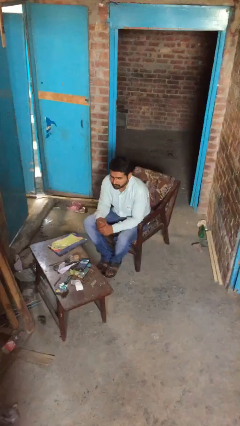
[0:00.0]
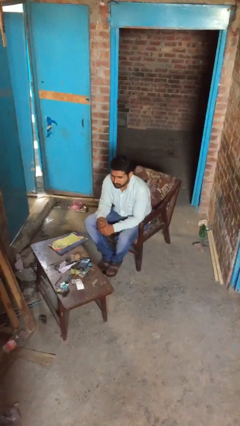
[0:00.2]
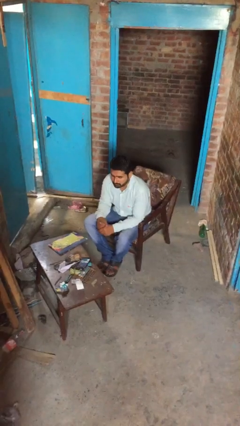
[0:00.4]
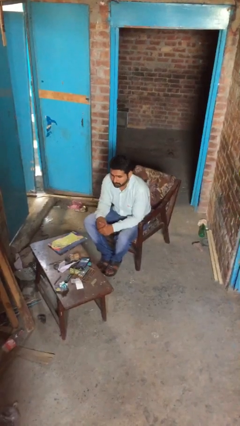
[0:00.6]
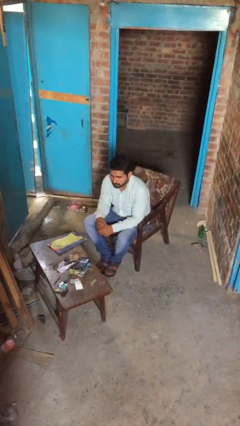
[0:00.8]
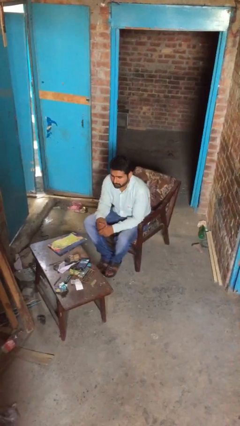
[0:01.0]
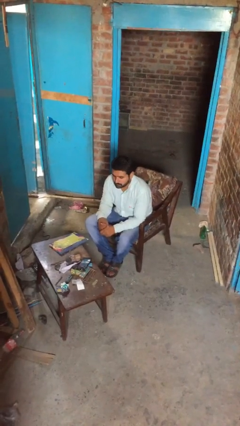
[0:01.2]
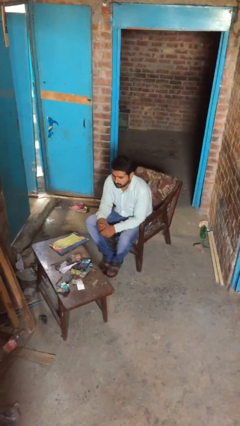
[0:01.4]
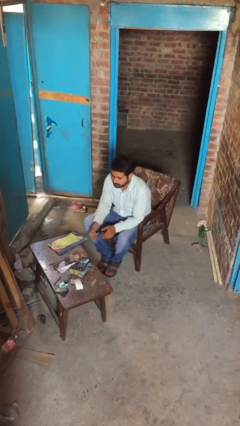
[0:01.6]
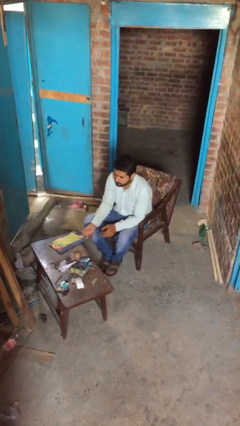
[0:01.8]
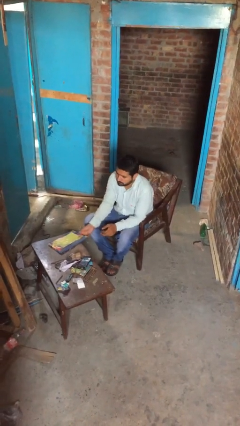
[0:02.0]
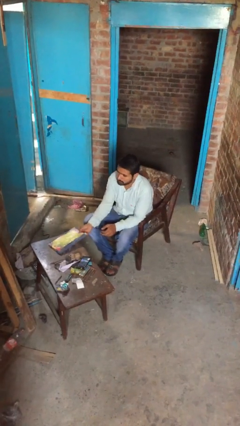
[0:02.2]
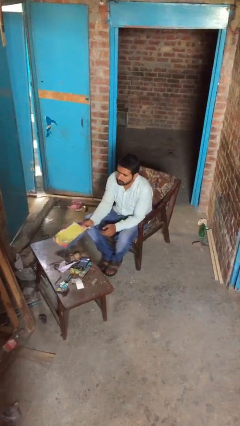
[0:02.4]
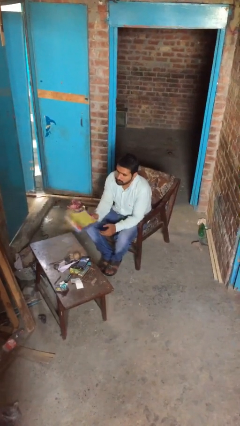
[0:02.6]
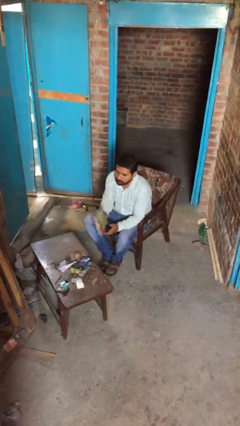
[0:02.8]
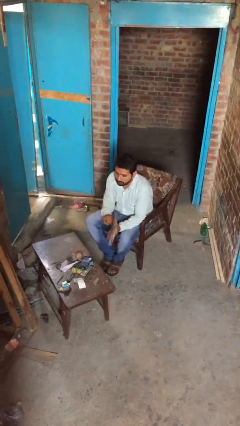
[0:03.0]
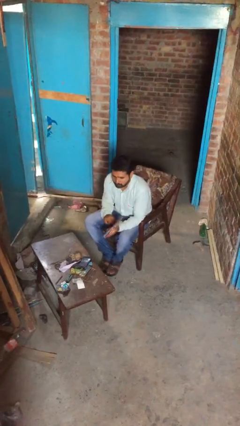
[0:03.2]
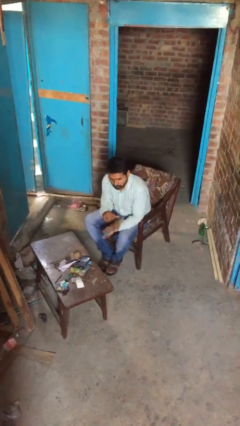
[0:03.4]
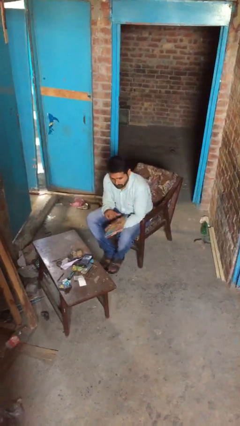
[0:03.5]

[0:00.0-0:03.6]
person picks up object from table

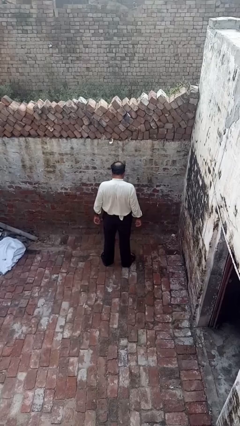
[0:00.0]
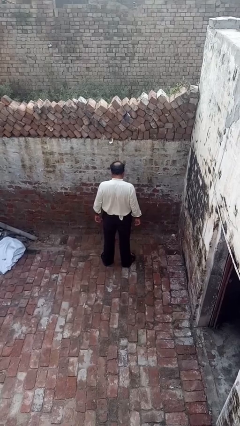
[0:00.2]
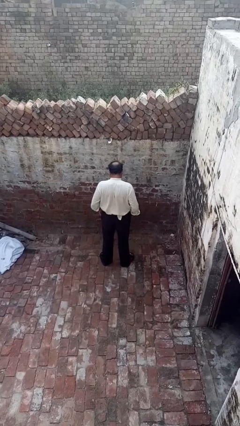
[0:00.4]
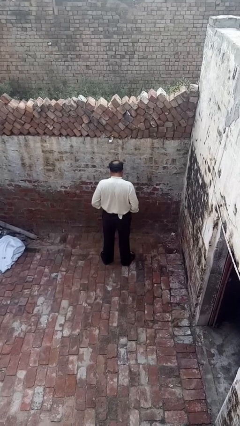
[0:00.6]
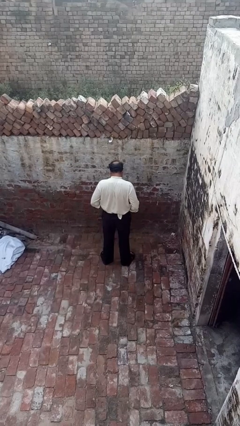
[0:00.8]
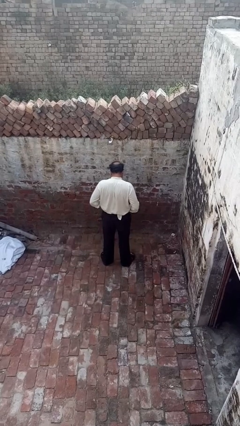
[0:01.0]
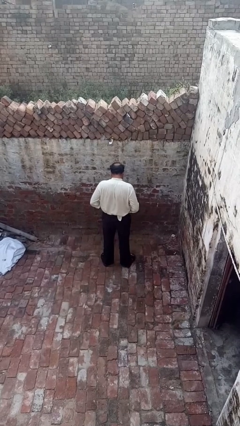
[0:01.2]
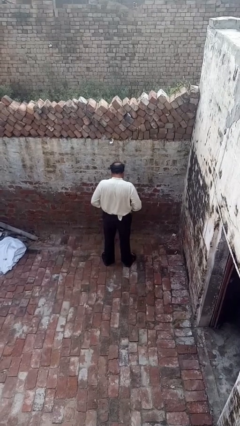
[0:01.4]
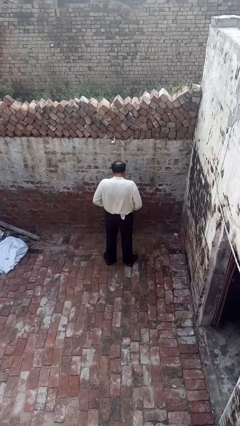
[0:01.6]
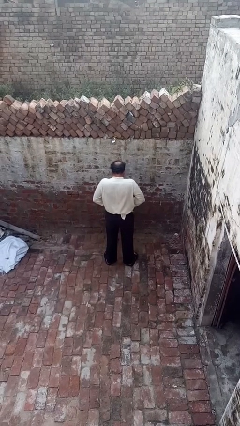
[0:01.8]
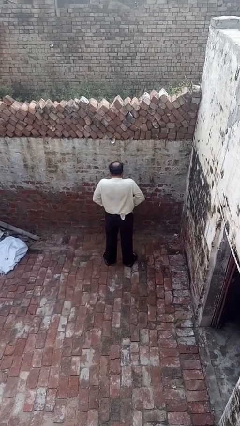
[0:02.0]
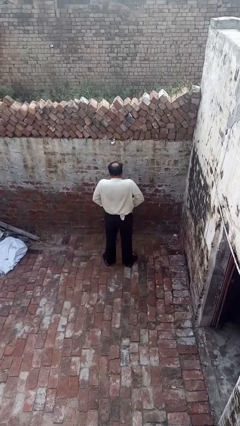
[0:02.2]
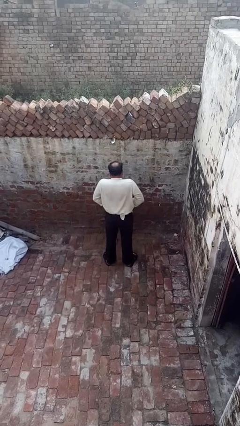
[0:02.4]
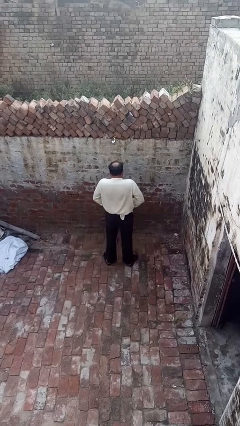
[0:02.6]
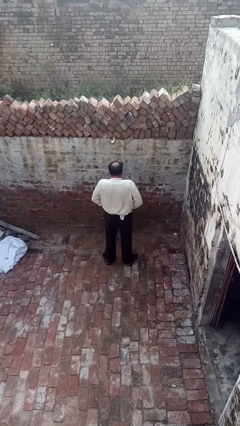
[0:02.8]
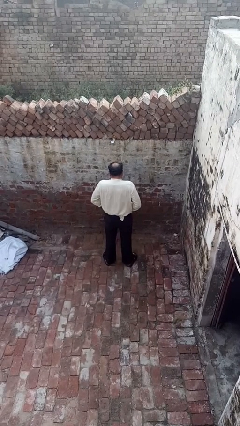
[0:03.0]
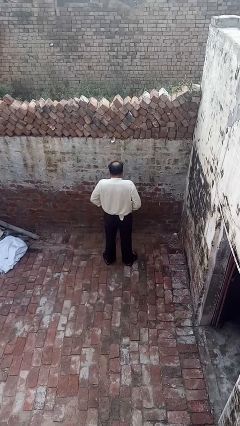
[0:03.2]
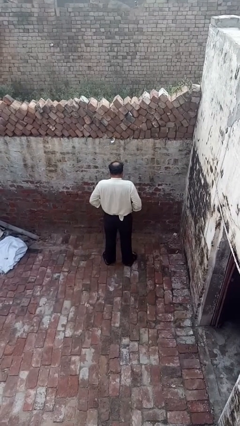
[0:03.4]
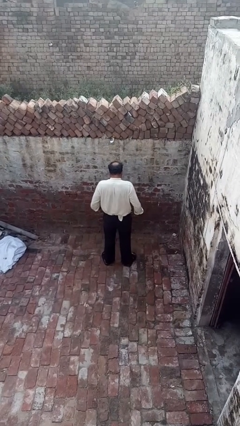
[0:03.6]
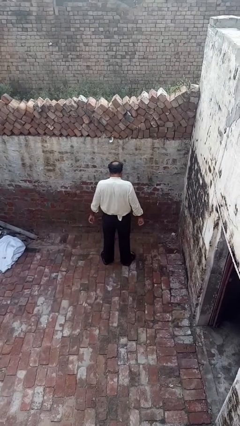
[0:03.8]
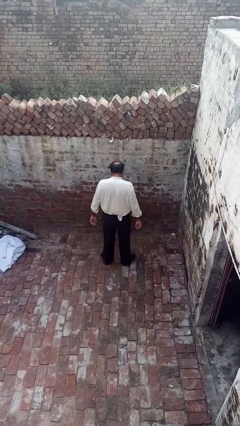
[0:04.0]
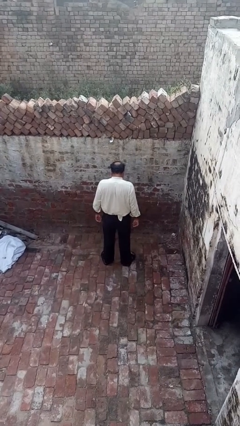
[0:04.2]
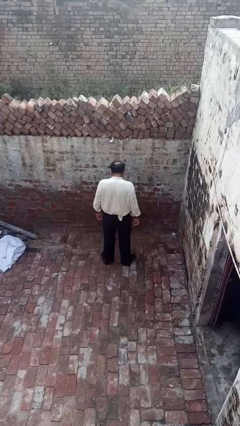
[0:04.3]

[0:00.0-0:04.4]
person hikes up pants

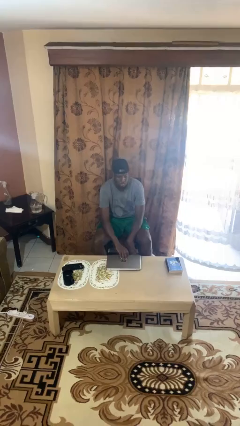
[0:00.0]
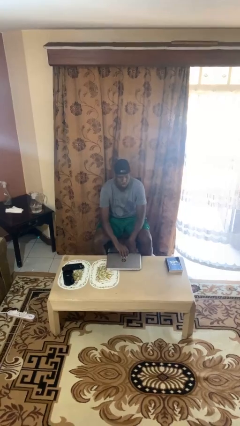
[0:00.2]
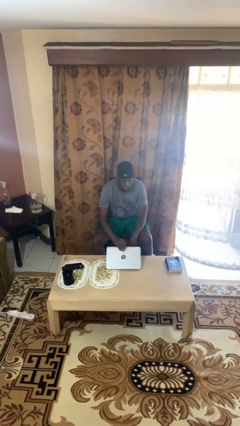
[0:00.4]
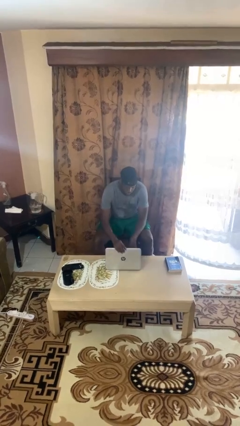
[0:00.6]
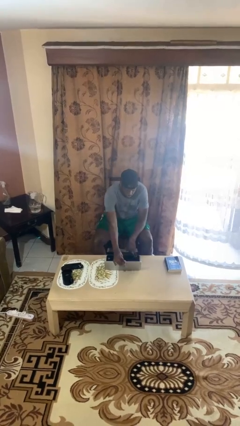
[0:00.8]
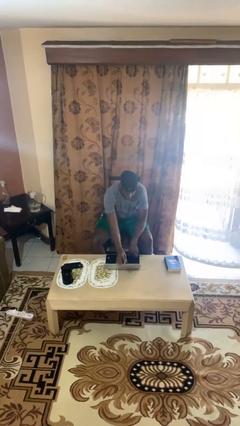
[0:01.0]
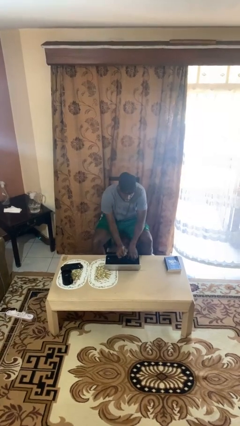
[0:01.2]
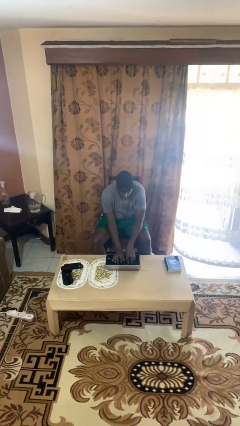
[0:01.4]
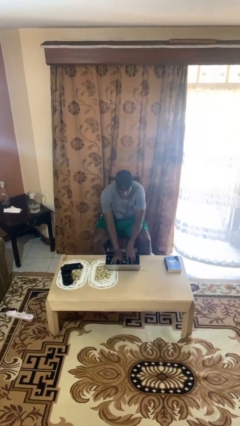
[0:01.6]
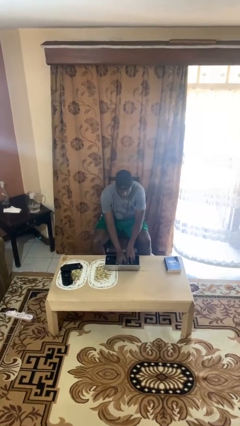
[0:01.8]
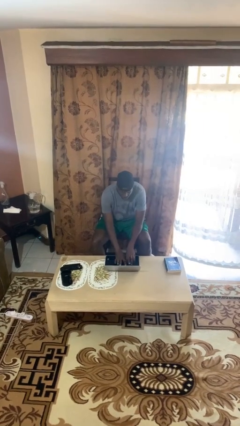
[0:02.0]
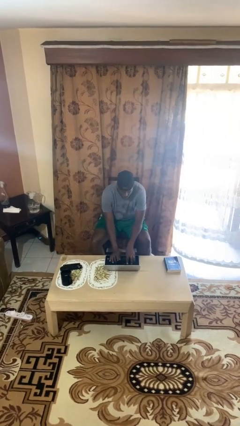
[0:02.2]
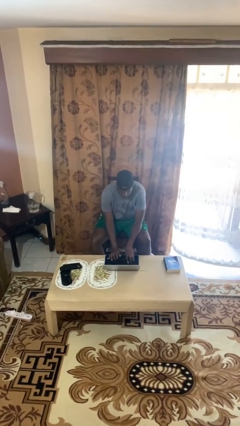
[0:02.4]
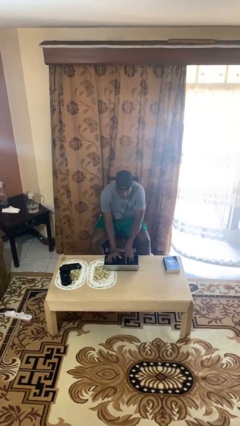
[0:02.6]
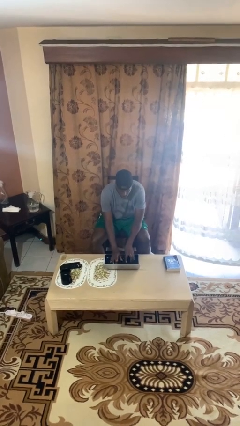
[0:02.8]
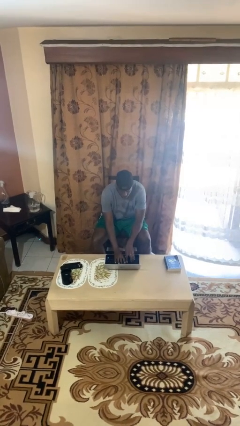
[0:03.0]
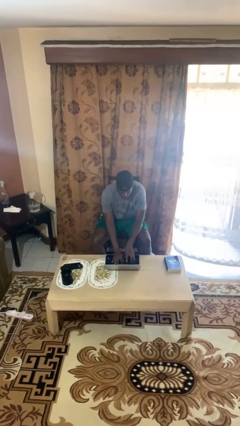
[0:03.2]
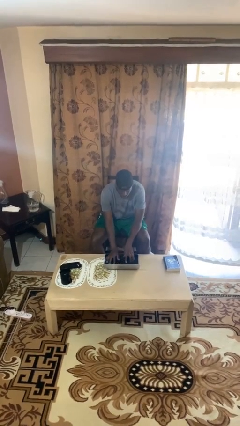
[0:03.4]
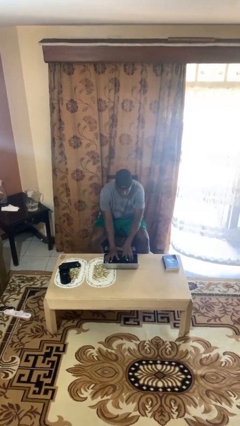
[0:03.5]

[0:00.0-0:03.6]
person interacts with laptop

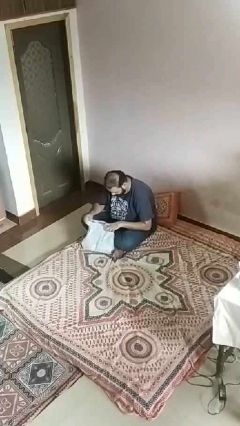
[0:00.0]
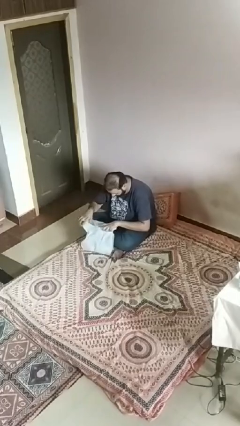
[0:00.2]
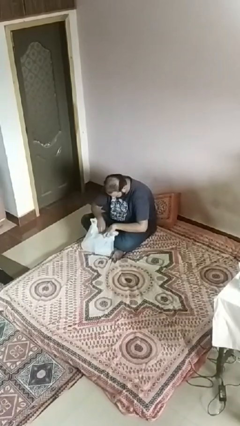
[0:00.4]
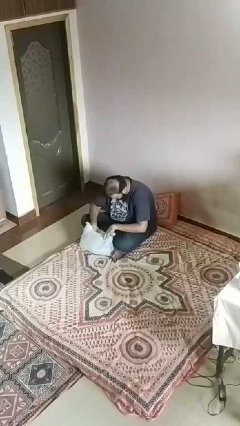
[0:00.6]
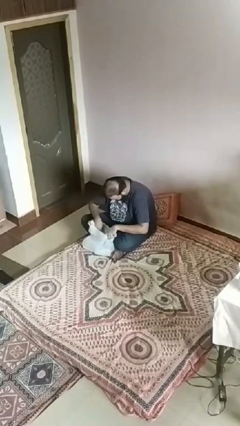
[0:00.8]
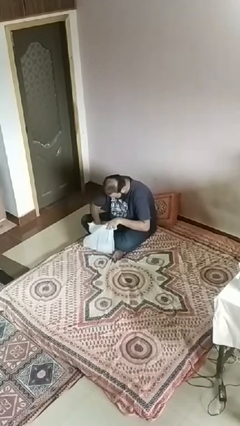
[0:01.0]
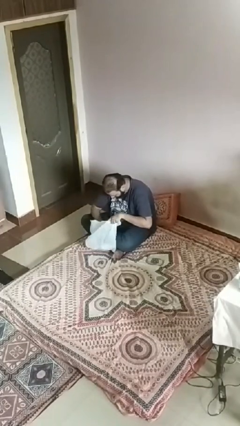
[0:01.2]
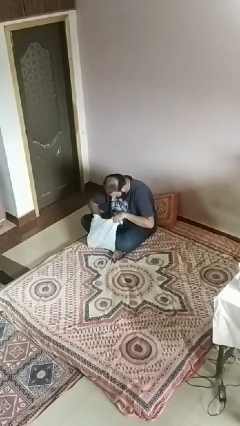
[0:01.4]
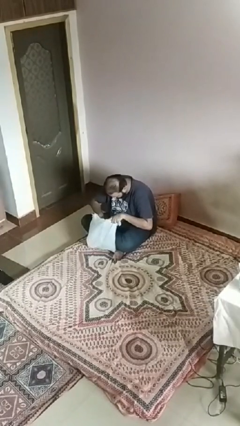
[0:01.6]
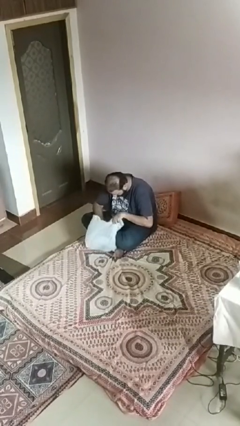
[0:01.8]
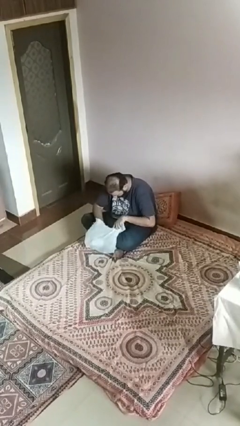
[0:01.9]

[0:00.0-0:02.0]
person searches in bag

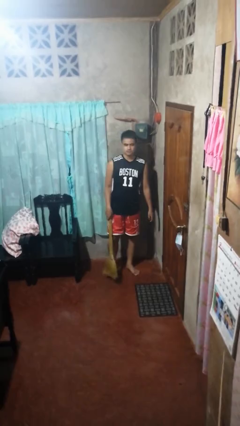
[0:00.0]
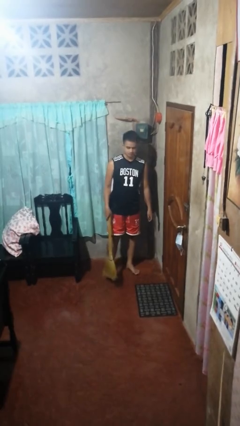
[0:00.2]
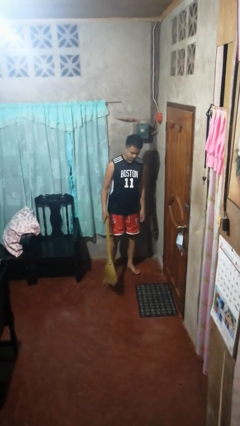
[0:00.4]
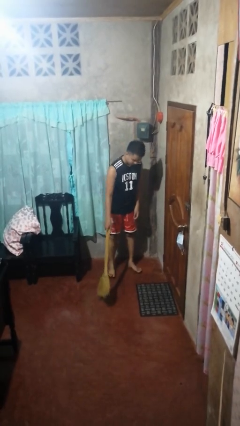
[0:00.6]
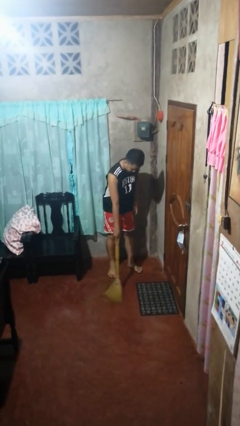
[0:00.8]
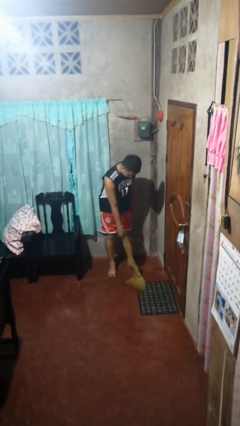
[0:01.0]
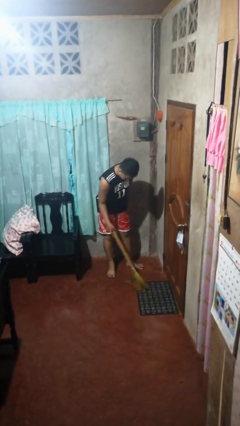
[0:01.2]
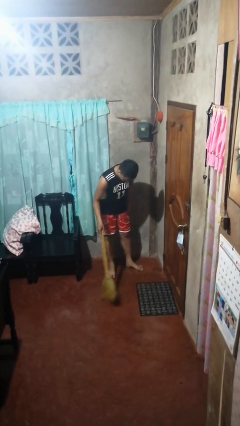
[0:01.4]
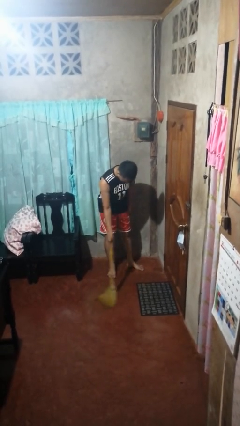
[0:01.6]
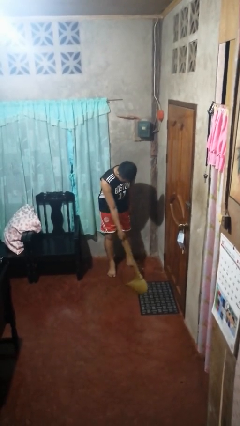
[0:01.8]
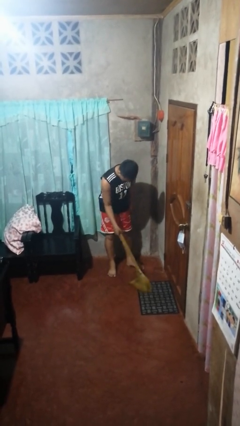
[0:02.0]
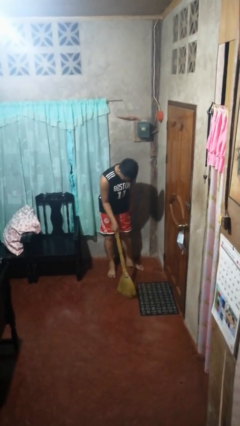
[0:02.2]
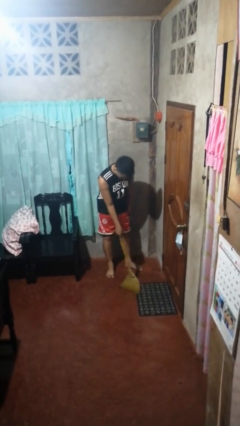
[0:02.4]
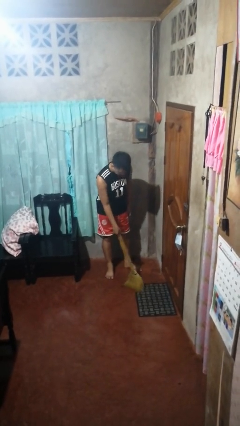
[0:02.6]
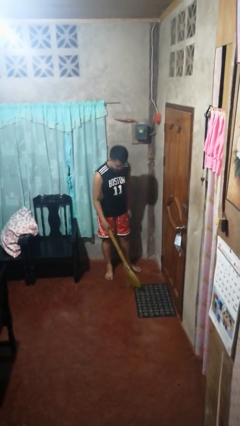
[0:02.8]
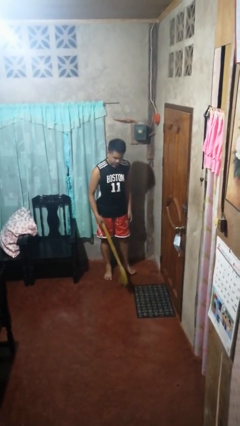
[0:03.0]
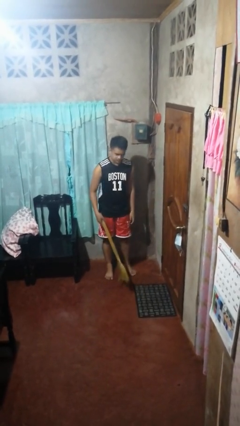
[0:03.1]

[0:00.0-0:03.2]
person sweeps floor

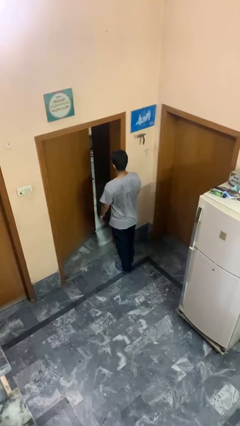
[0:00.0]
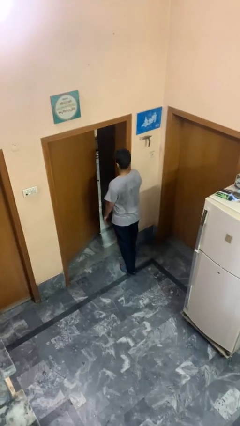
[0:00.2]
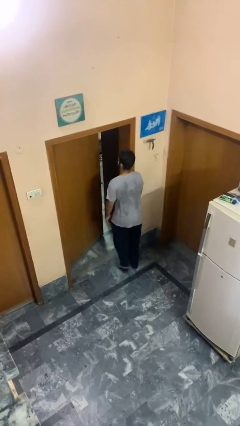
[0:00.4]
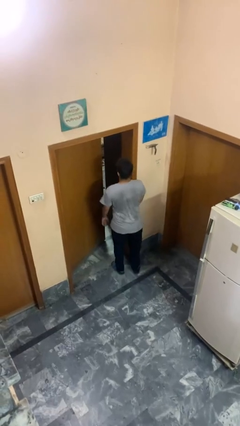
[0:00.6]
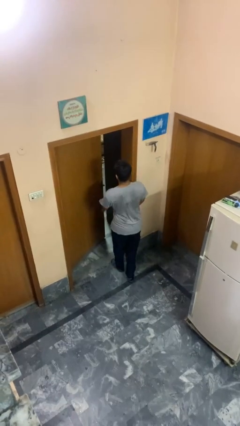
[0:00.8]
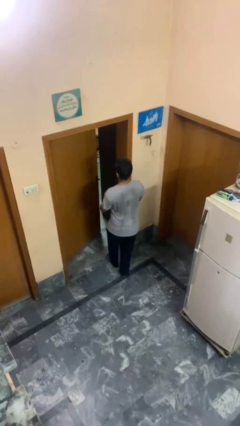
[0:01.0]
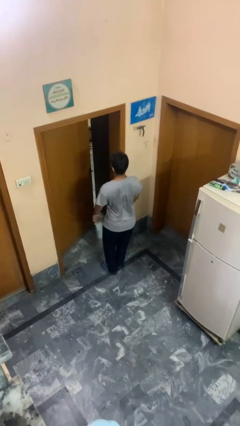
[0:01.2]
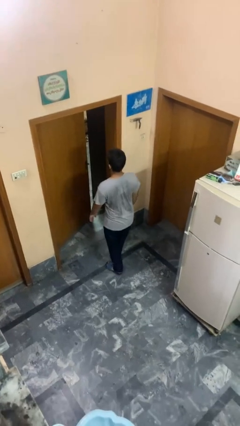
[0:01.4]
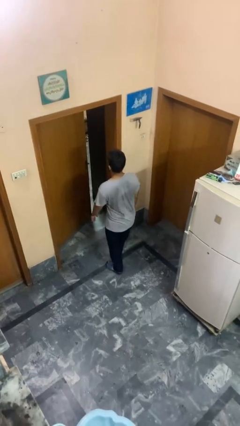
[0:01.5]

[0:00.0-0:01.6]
person bumps into wall
